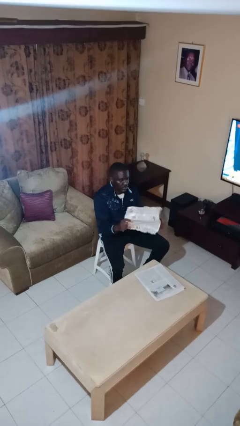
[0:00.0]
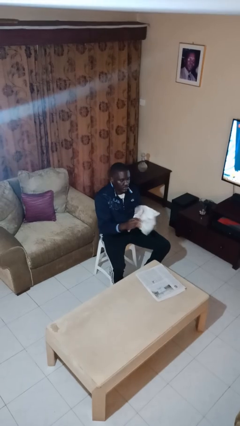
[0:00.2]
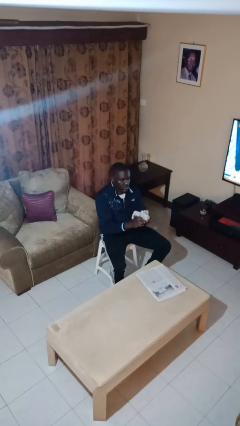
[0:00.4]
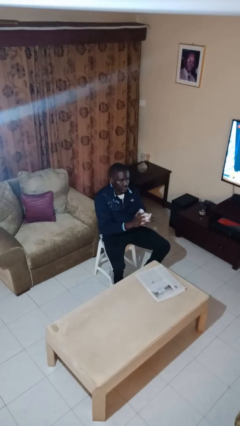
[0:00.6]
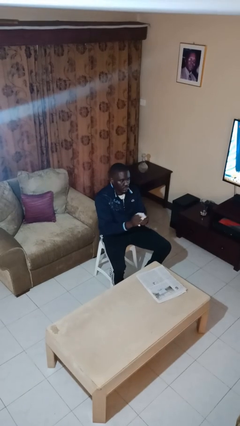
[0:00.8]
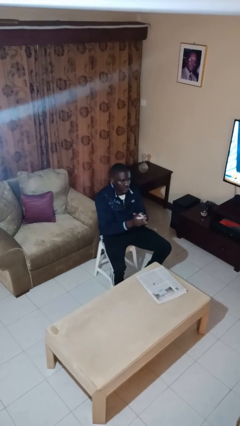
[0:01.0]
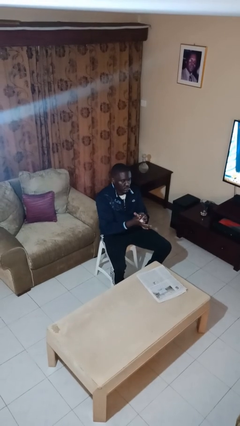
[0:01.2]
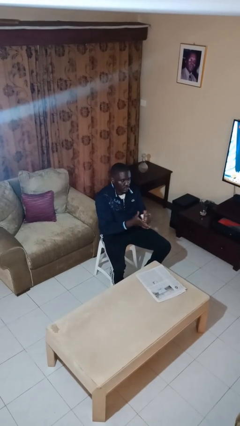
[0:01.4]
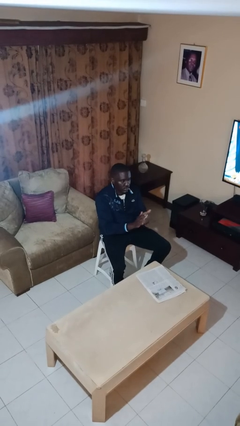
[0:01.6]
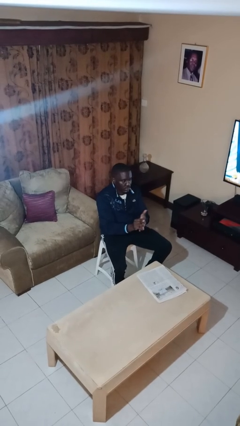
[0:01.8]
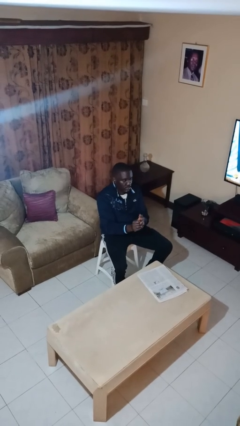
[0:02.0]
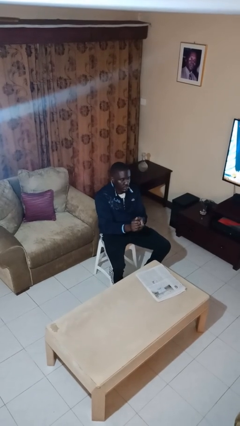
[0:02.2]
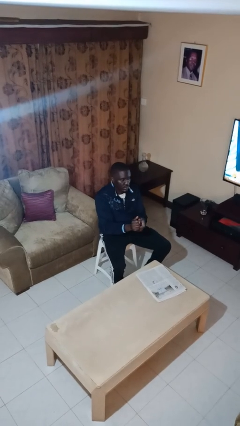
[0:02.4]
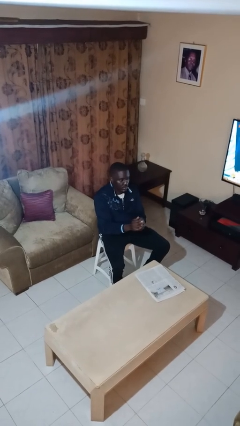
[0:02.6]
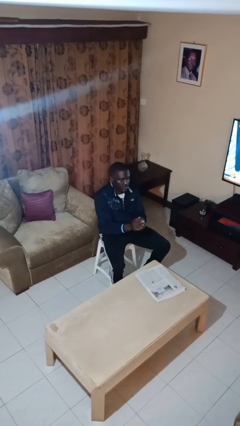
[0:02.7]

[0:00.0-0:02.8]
person crumples paper

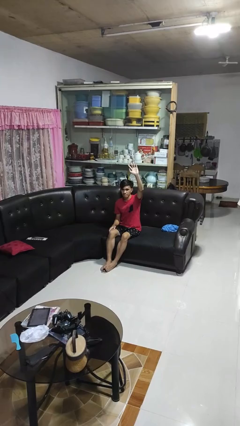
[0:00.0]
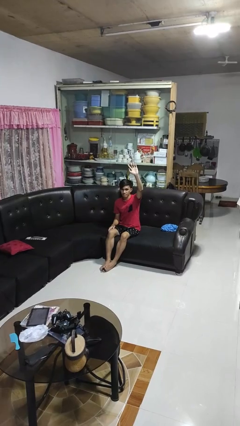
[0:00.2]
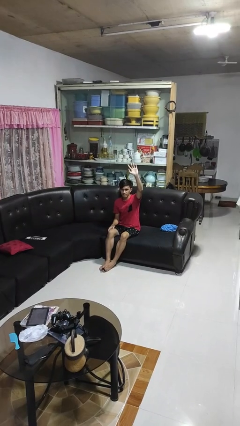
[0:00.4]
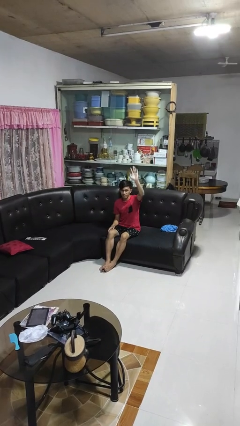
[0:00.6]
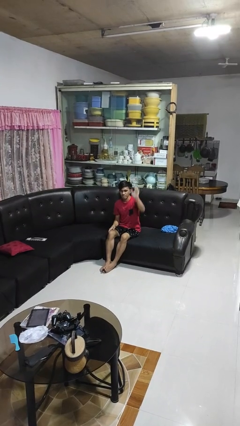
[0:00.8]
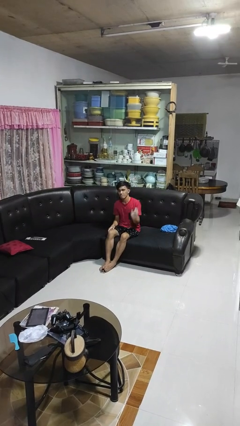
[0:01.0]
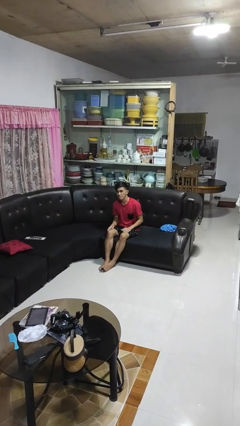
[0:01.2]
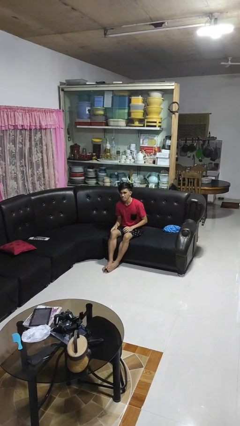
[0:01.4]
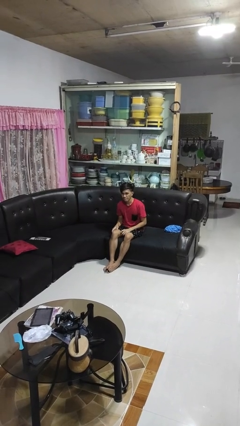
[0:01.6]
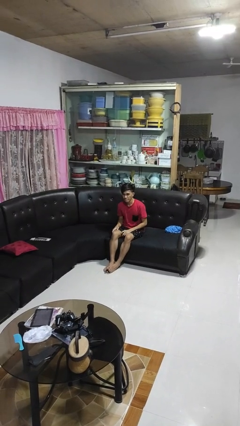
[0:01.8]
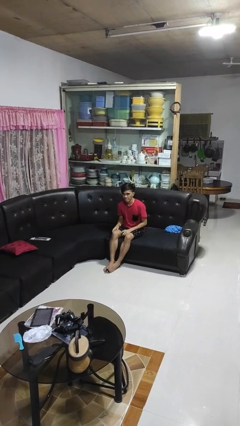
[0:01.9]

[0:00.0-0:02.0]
person gestures lower hand

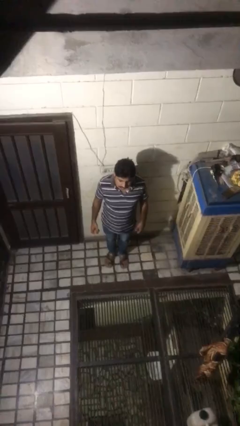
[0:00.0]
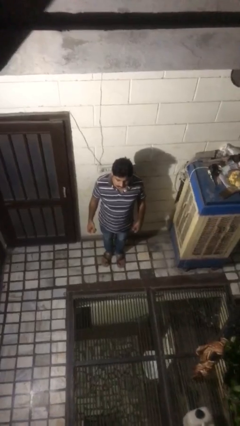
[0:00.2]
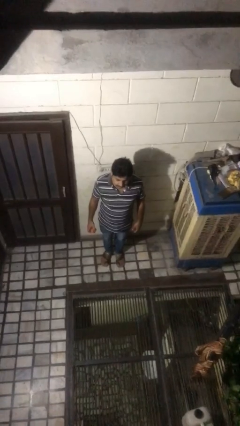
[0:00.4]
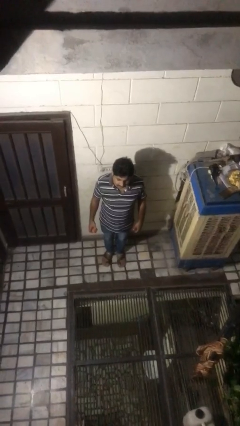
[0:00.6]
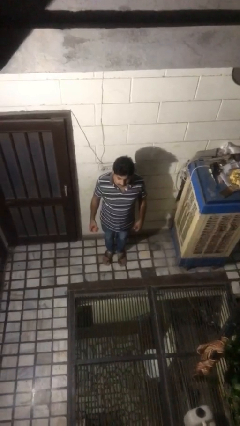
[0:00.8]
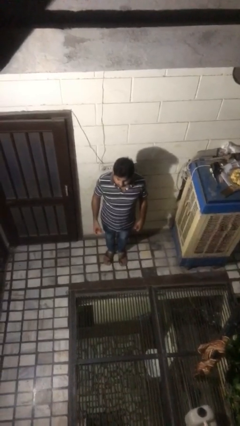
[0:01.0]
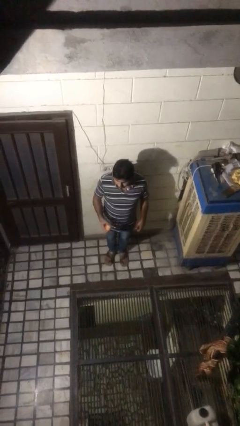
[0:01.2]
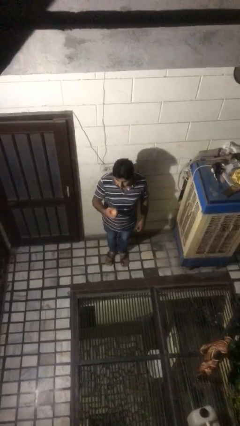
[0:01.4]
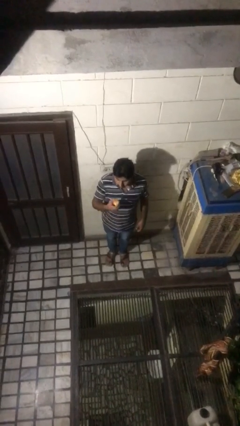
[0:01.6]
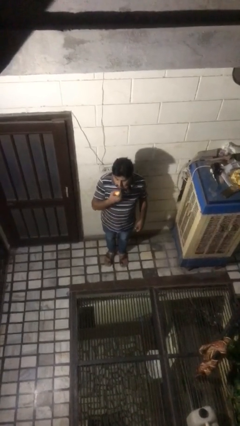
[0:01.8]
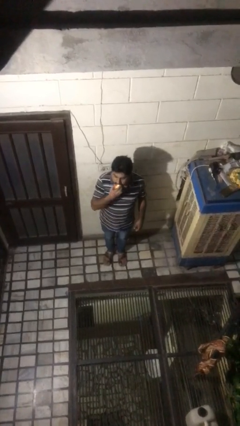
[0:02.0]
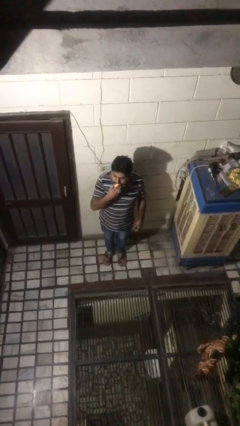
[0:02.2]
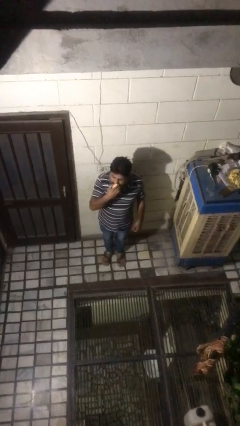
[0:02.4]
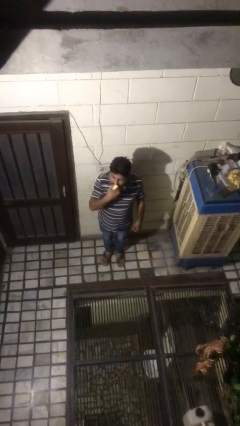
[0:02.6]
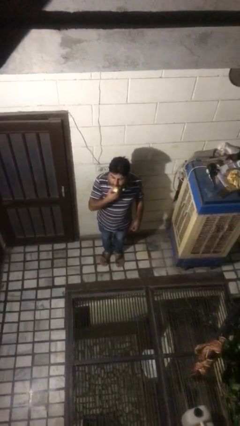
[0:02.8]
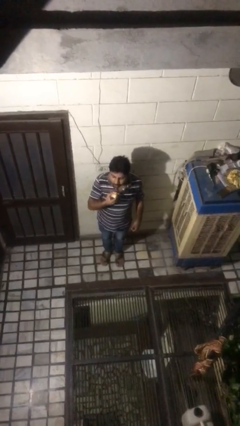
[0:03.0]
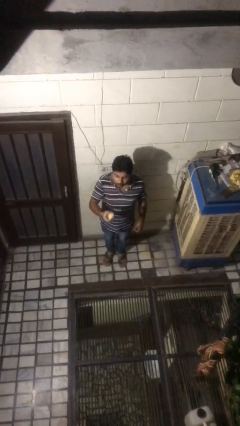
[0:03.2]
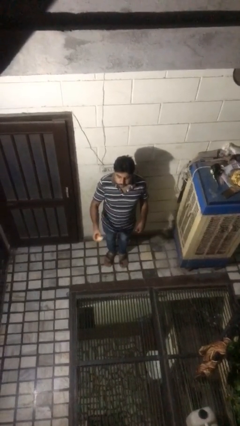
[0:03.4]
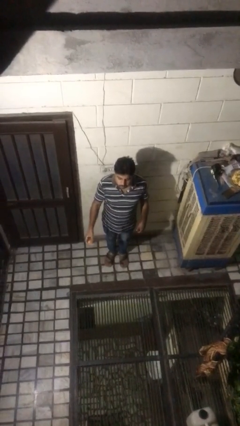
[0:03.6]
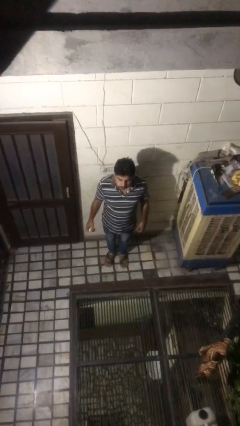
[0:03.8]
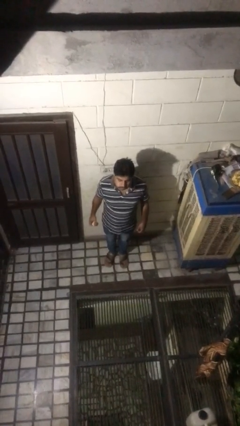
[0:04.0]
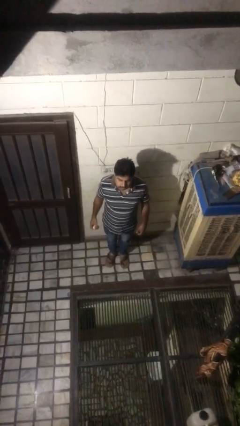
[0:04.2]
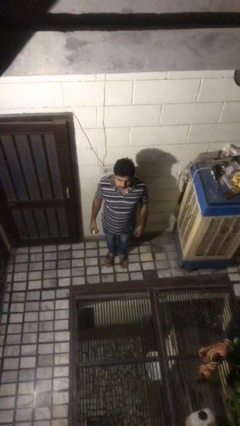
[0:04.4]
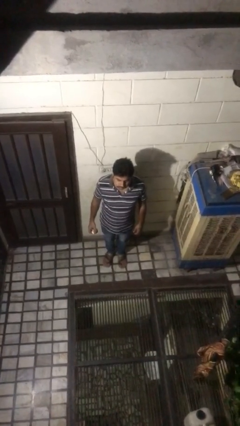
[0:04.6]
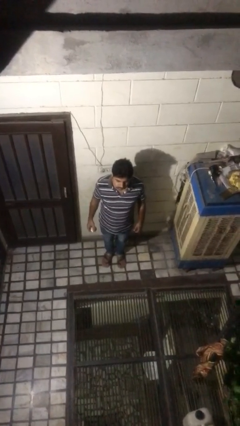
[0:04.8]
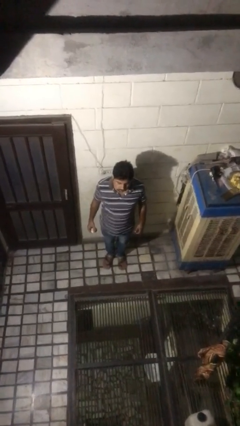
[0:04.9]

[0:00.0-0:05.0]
person eats apple

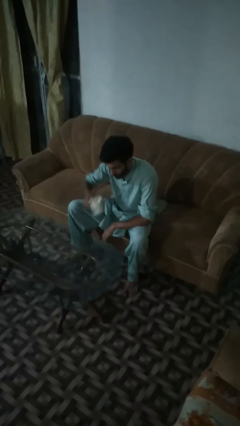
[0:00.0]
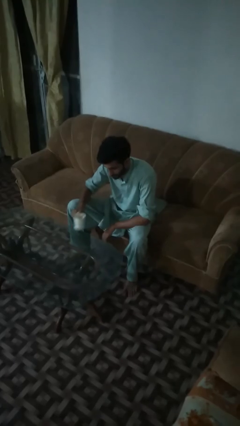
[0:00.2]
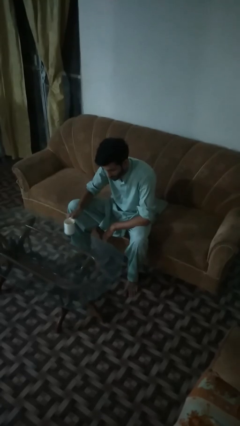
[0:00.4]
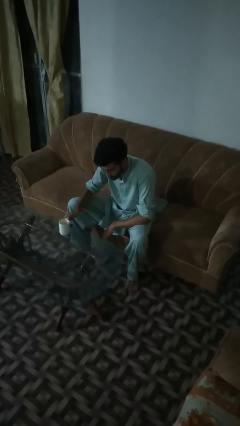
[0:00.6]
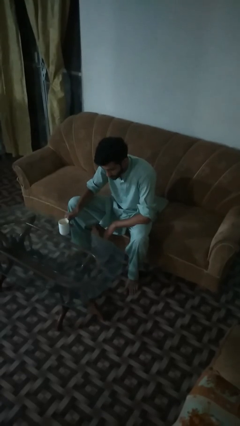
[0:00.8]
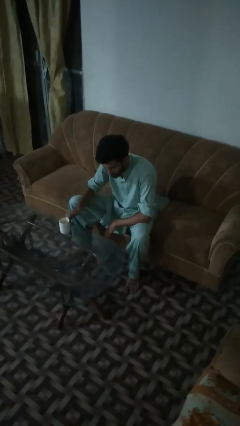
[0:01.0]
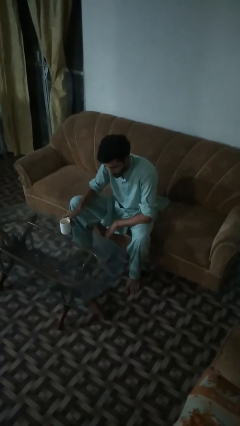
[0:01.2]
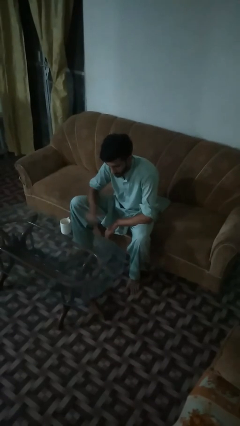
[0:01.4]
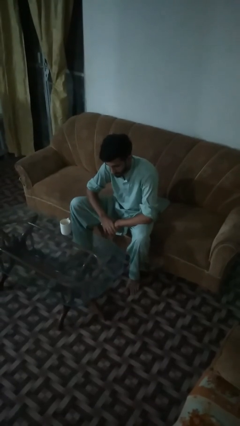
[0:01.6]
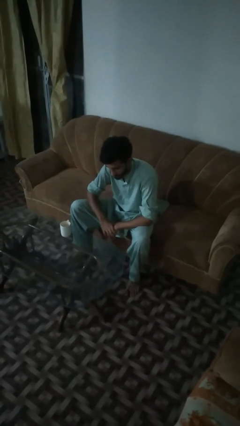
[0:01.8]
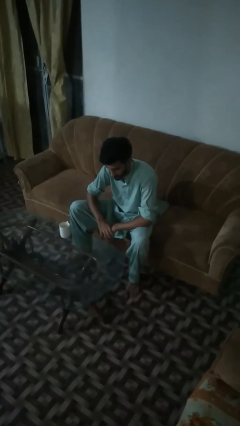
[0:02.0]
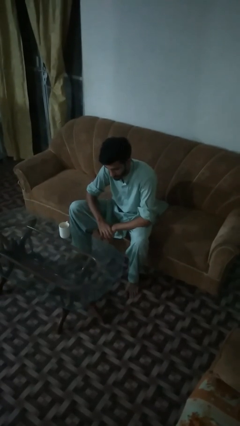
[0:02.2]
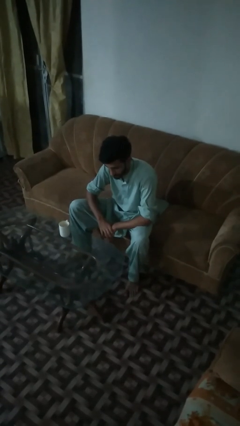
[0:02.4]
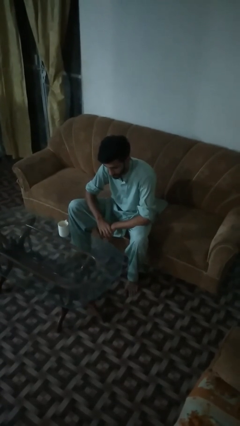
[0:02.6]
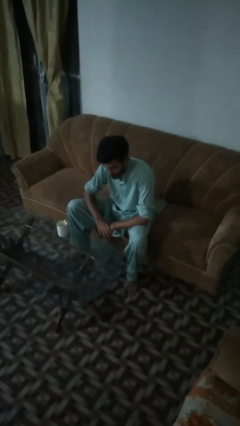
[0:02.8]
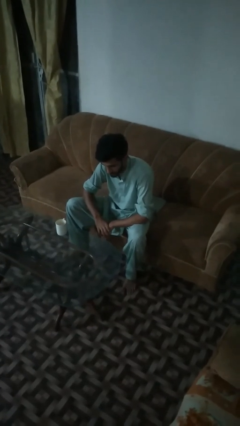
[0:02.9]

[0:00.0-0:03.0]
person puts down object on table

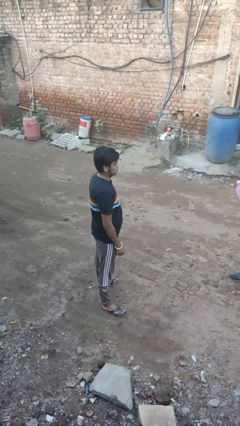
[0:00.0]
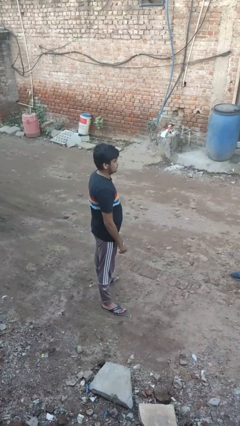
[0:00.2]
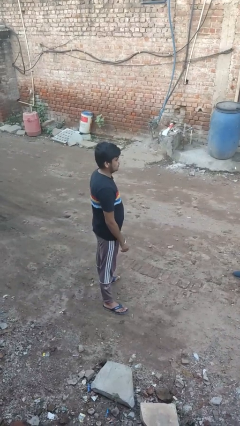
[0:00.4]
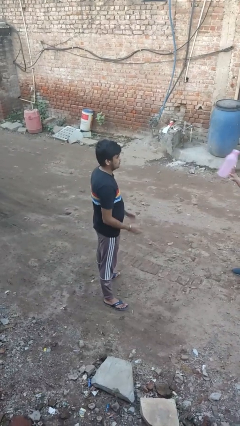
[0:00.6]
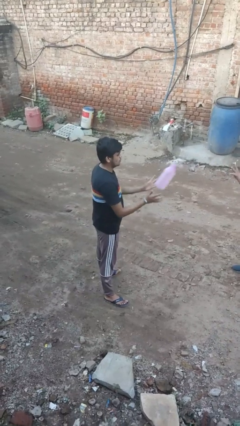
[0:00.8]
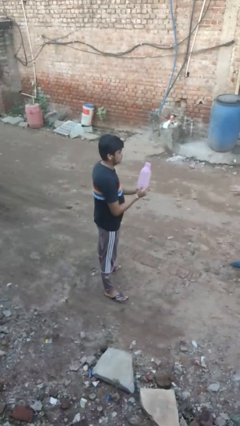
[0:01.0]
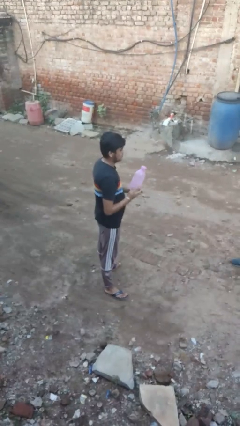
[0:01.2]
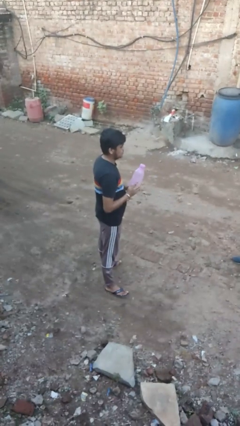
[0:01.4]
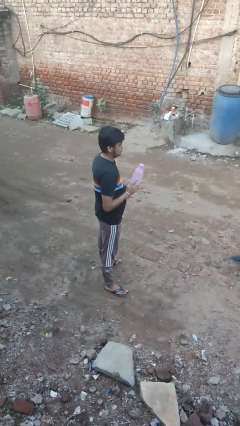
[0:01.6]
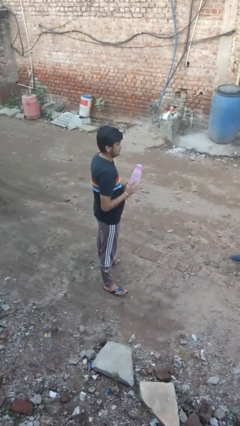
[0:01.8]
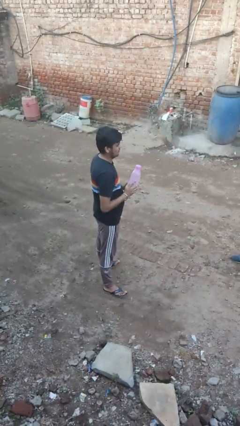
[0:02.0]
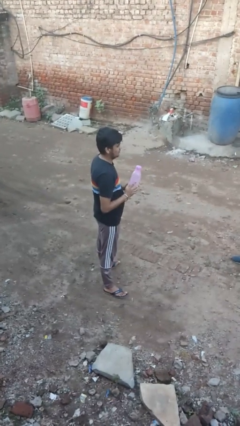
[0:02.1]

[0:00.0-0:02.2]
person catches object from person

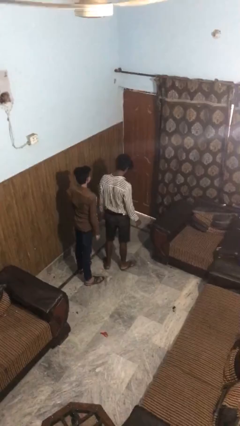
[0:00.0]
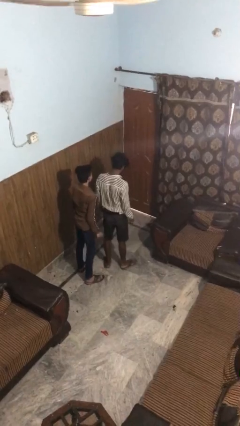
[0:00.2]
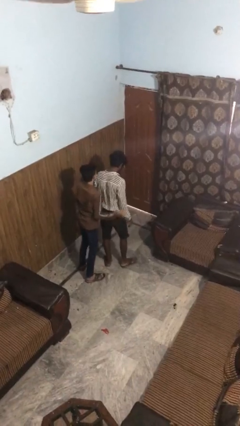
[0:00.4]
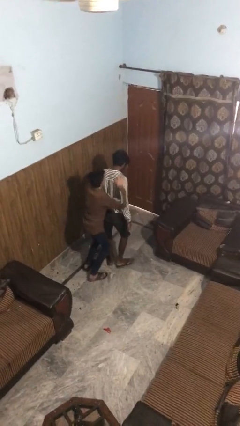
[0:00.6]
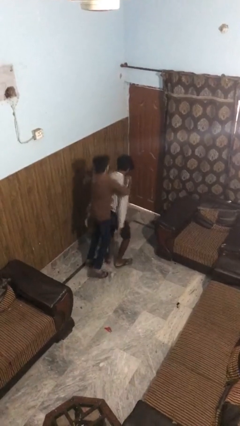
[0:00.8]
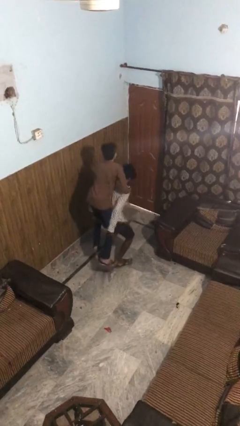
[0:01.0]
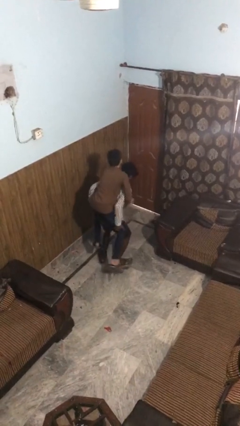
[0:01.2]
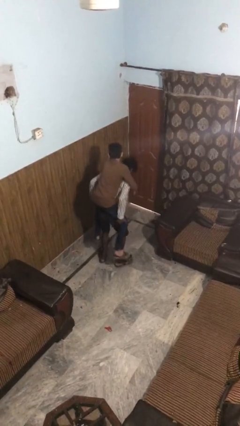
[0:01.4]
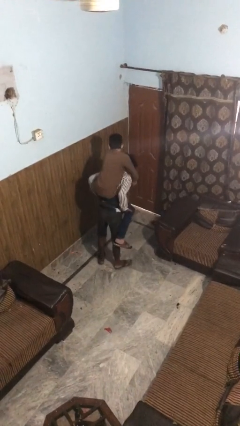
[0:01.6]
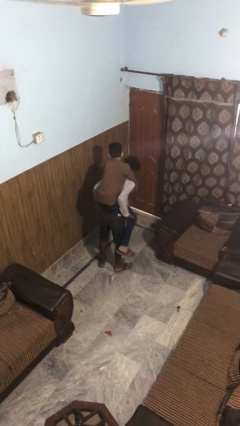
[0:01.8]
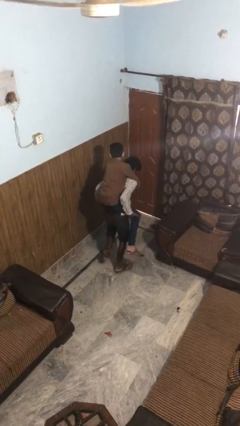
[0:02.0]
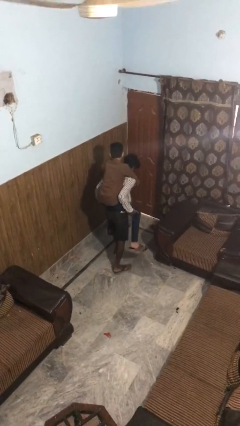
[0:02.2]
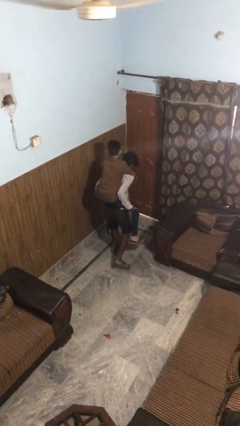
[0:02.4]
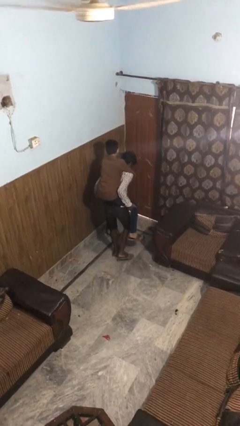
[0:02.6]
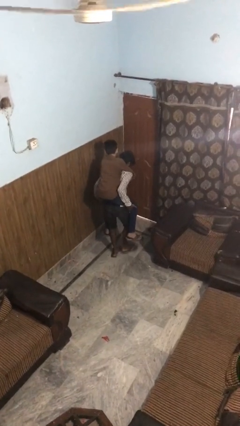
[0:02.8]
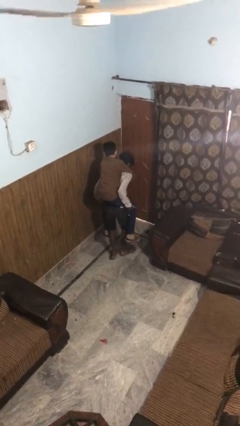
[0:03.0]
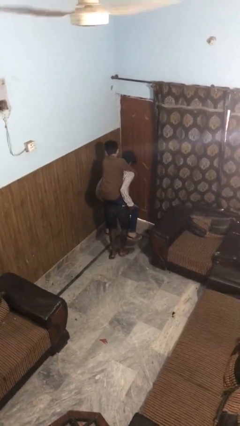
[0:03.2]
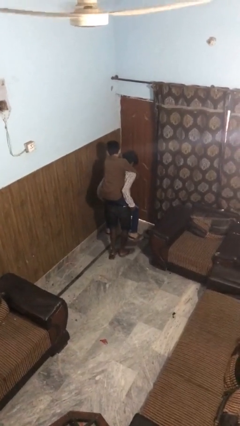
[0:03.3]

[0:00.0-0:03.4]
person carries person on back
